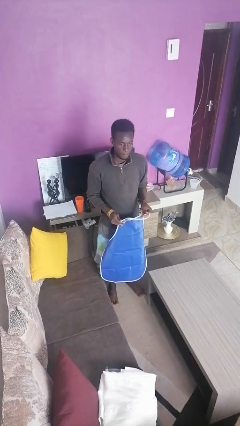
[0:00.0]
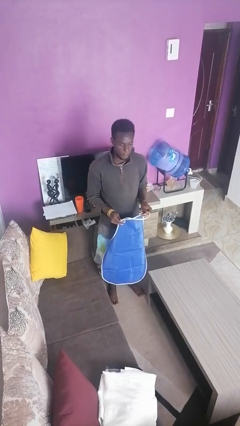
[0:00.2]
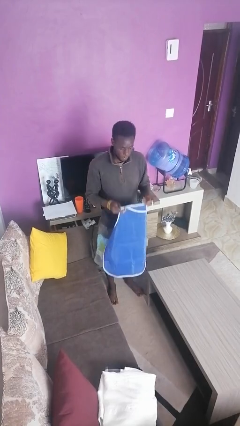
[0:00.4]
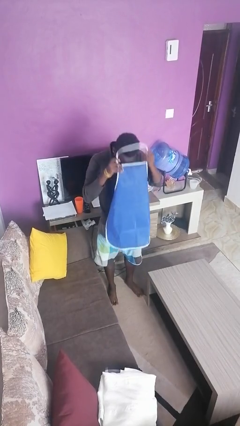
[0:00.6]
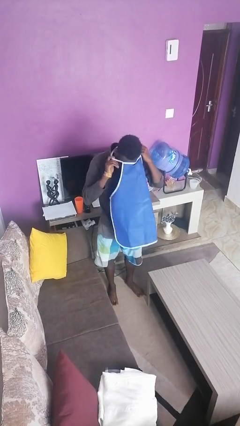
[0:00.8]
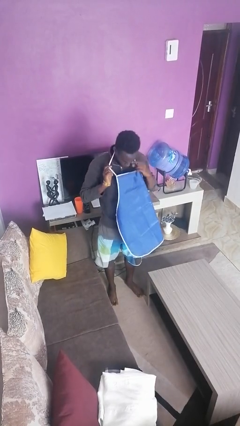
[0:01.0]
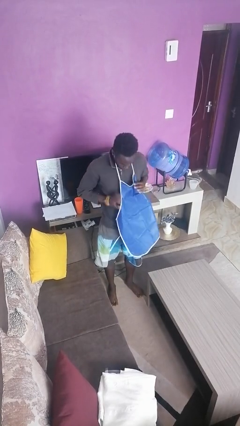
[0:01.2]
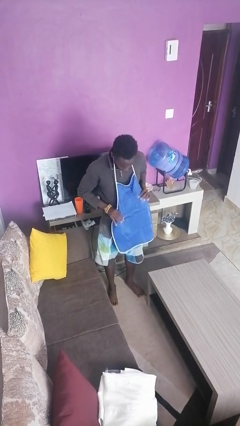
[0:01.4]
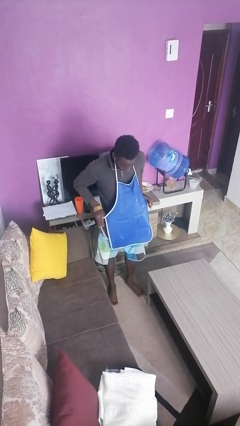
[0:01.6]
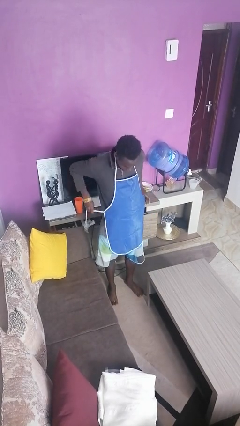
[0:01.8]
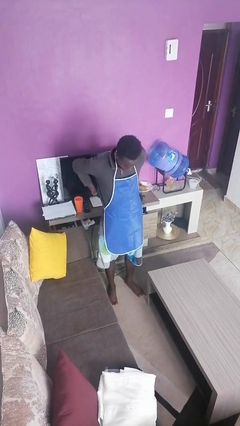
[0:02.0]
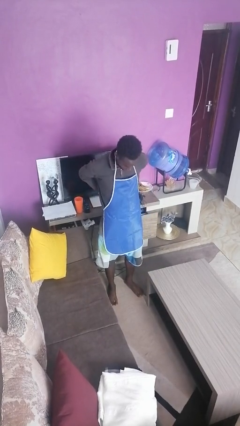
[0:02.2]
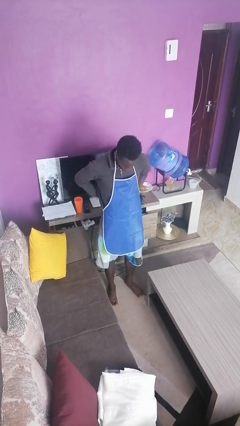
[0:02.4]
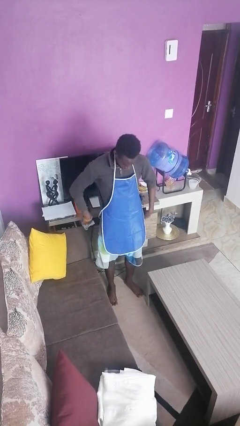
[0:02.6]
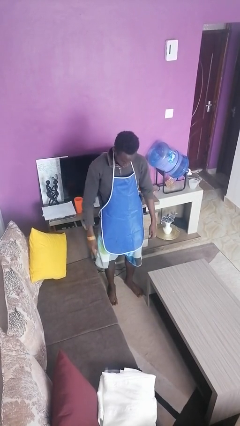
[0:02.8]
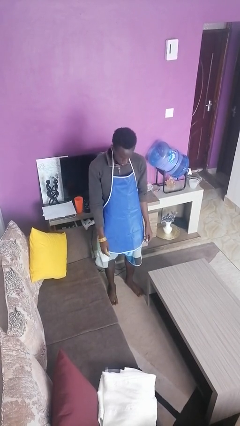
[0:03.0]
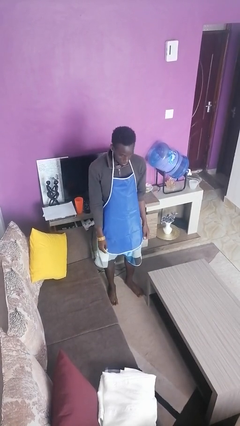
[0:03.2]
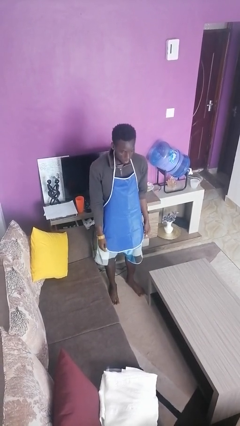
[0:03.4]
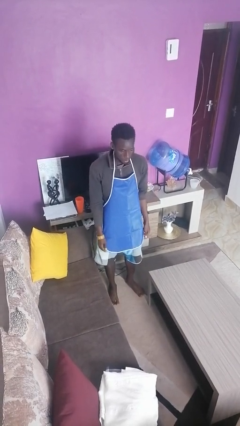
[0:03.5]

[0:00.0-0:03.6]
person puts on apron

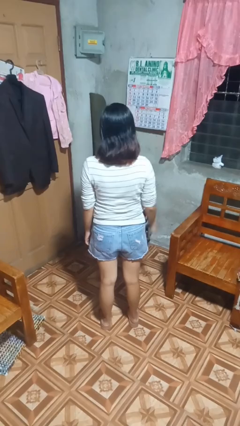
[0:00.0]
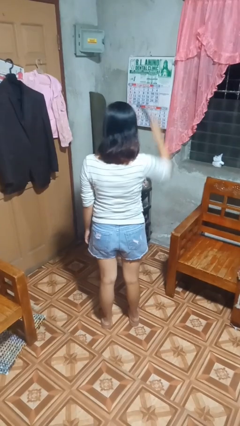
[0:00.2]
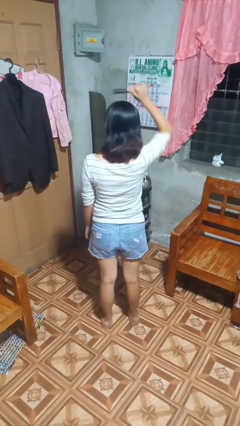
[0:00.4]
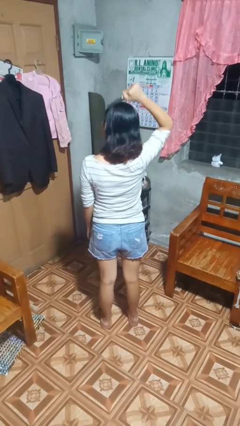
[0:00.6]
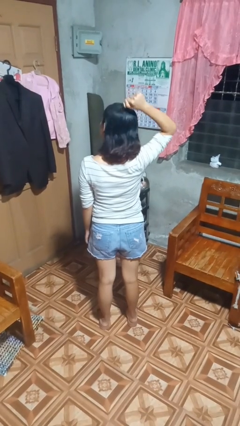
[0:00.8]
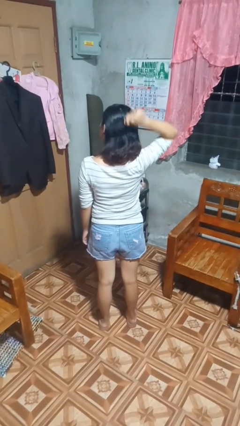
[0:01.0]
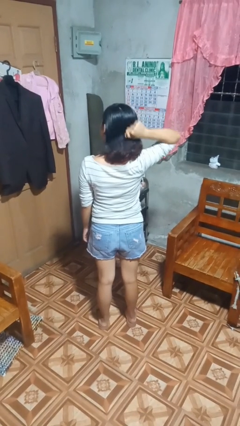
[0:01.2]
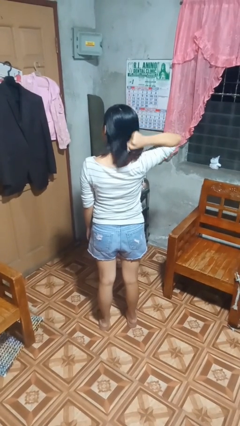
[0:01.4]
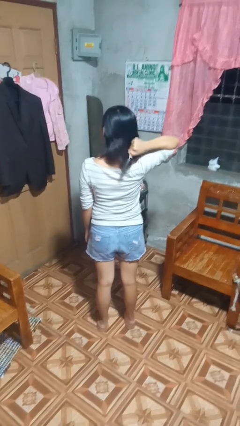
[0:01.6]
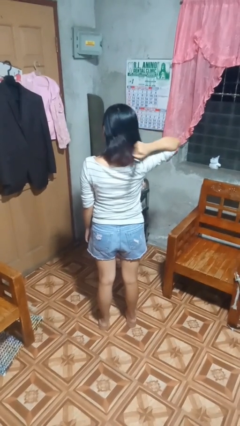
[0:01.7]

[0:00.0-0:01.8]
person brushes hair

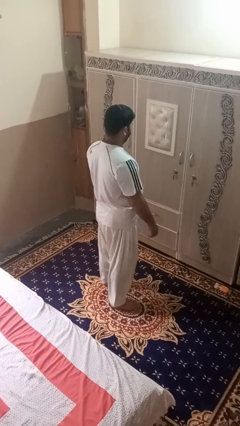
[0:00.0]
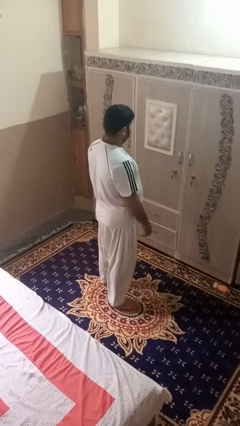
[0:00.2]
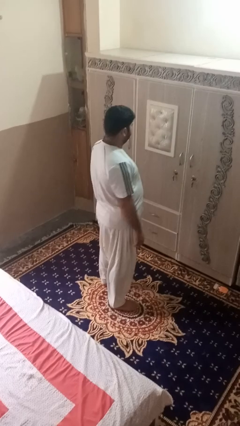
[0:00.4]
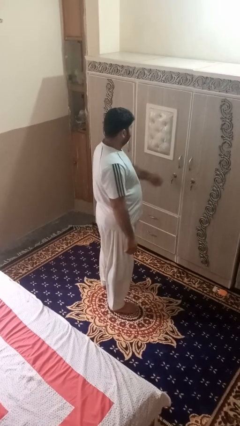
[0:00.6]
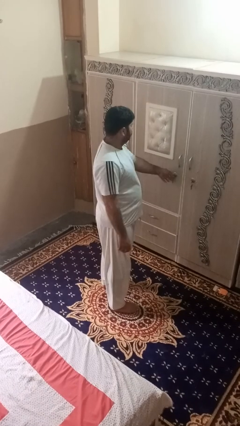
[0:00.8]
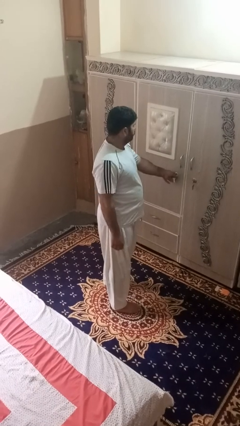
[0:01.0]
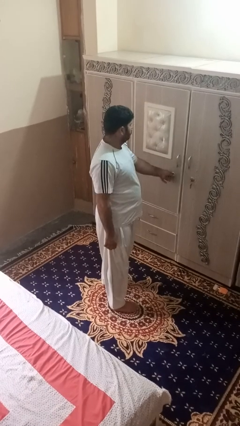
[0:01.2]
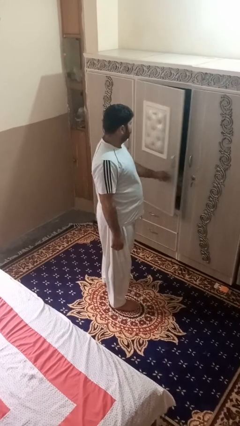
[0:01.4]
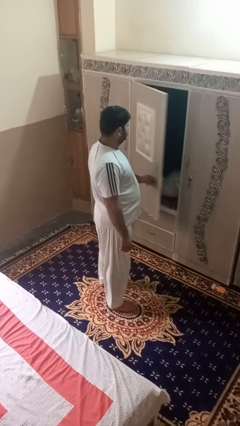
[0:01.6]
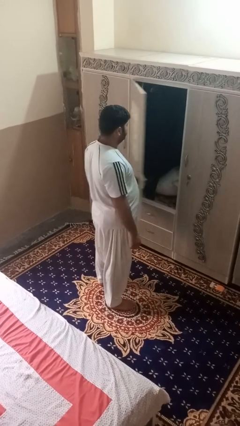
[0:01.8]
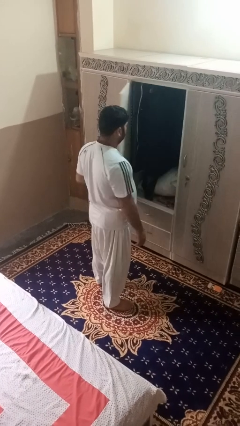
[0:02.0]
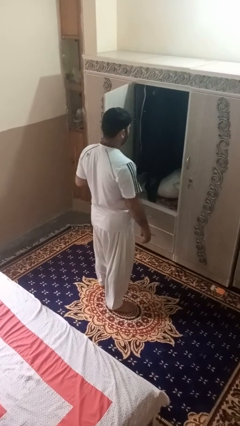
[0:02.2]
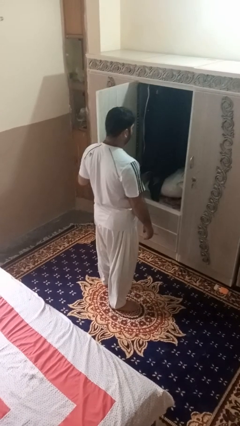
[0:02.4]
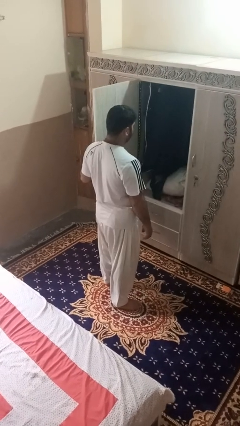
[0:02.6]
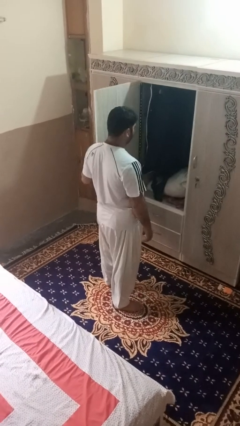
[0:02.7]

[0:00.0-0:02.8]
person opens dresser drawer

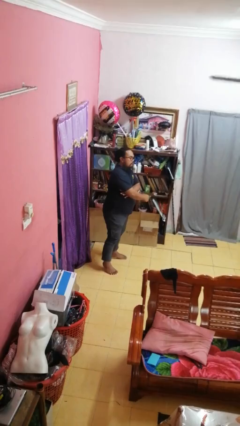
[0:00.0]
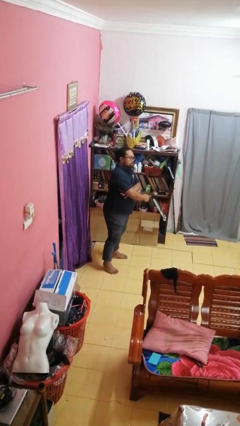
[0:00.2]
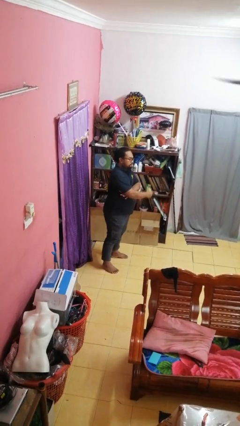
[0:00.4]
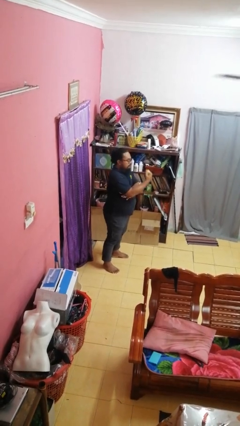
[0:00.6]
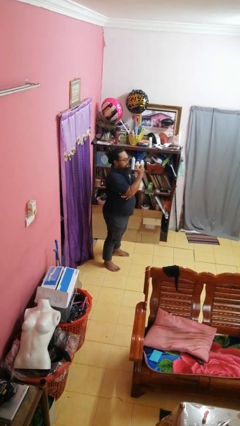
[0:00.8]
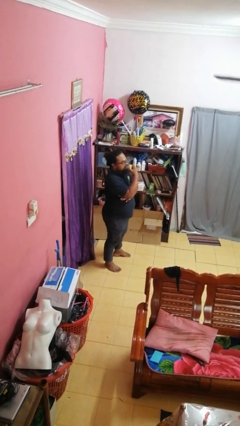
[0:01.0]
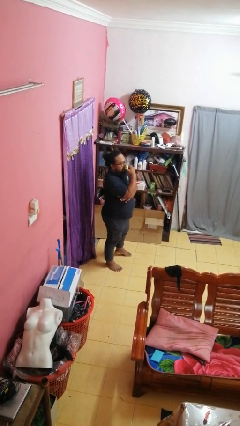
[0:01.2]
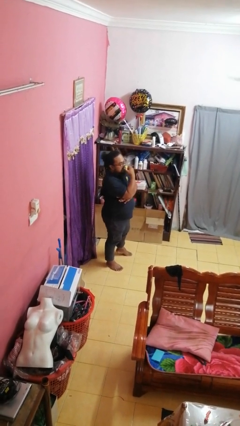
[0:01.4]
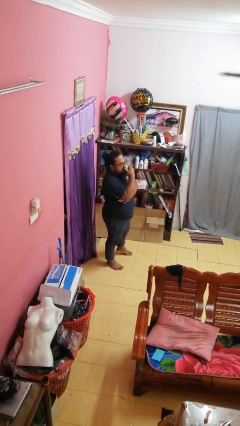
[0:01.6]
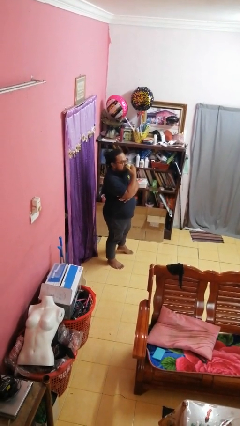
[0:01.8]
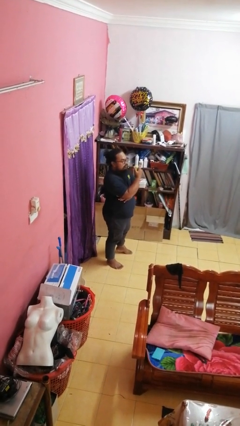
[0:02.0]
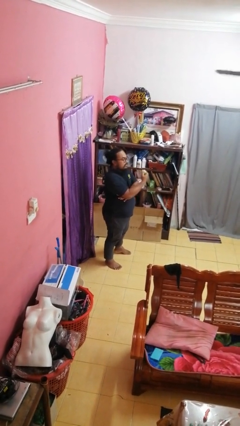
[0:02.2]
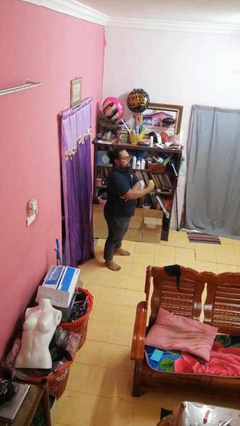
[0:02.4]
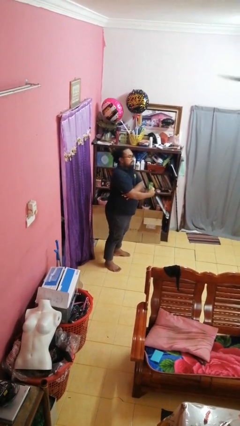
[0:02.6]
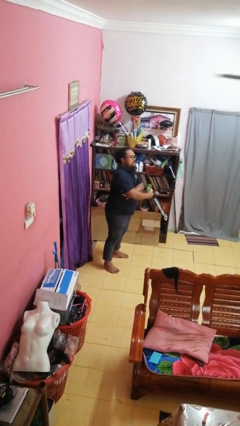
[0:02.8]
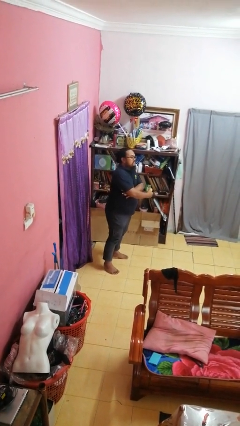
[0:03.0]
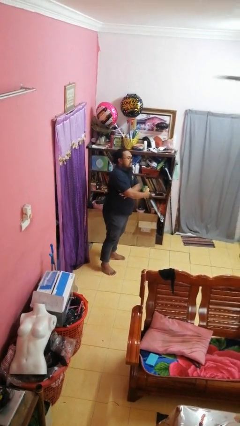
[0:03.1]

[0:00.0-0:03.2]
person eats apple

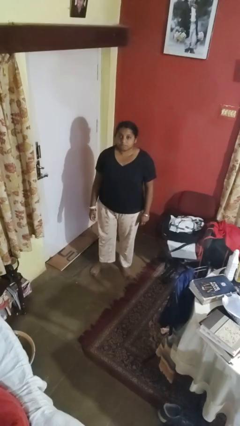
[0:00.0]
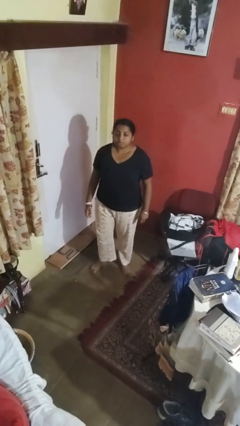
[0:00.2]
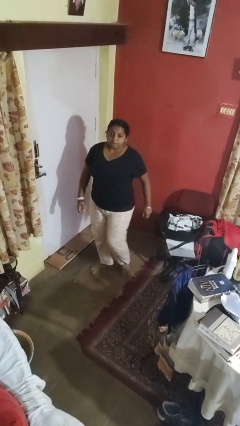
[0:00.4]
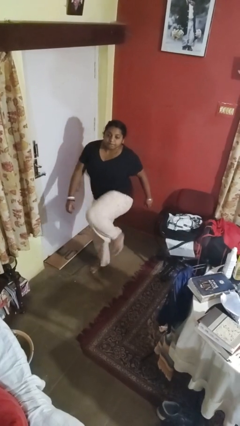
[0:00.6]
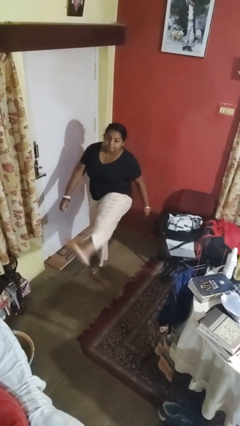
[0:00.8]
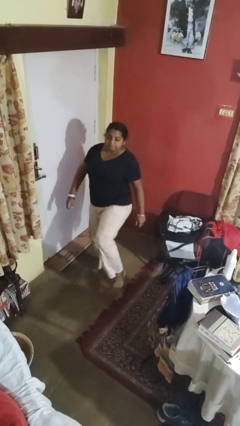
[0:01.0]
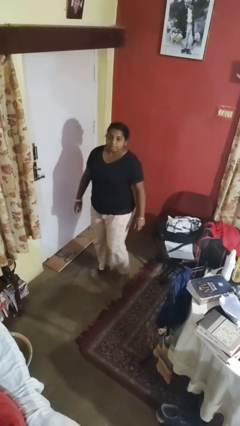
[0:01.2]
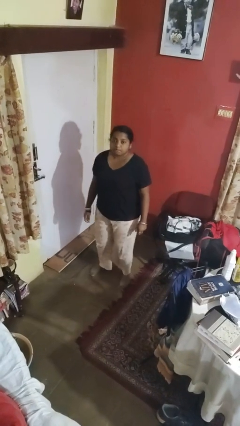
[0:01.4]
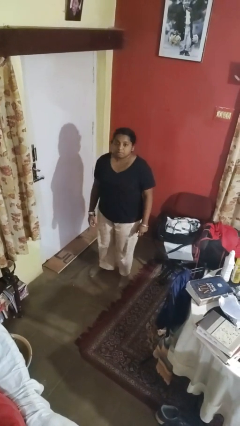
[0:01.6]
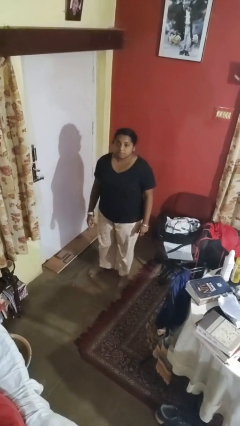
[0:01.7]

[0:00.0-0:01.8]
person karate kicks

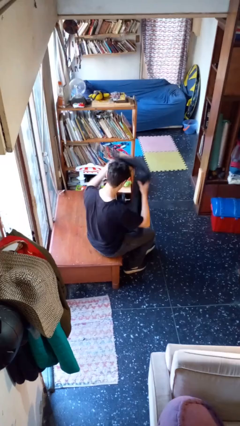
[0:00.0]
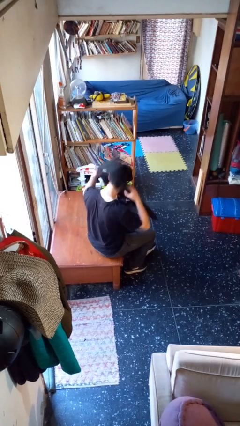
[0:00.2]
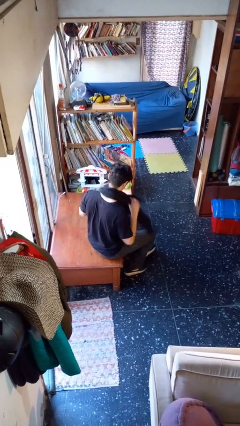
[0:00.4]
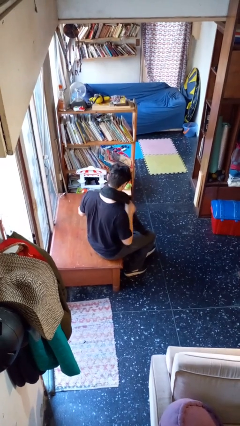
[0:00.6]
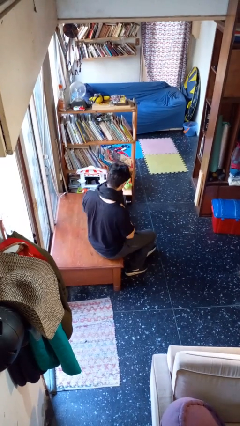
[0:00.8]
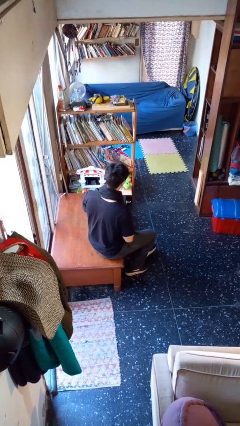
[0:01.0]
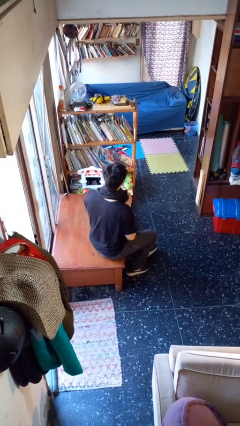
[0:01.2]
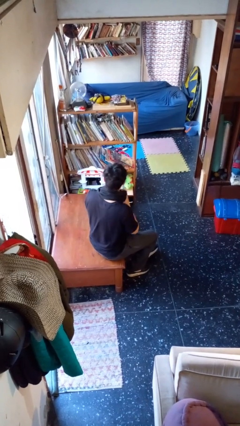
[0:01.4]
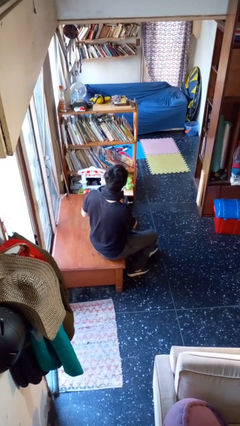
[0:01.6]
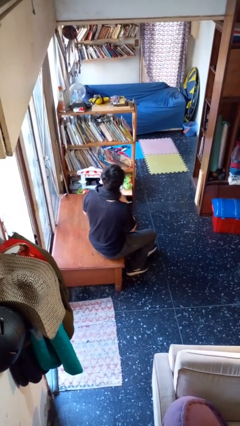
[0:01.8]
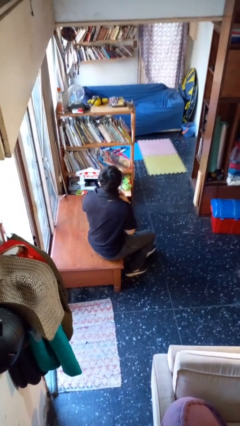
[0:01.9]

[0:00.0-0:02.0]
person puts on scarf

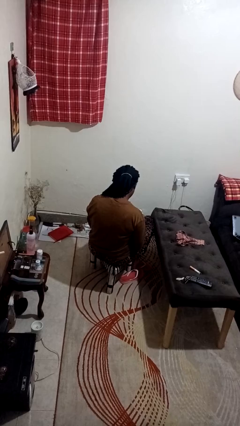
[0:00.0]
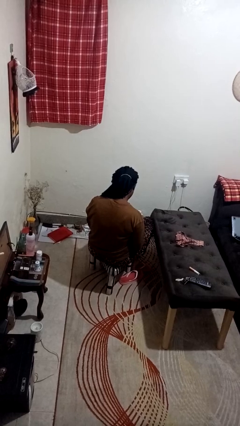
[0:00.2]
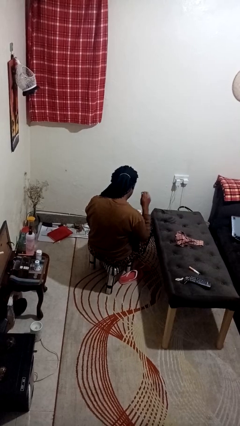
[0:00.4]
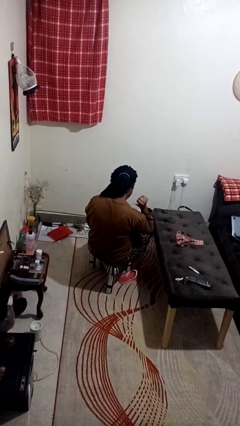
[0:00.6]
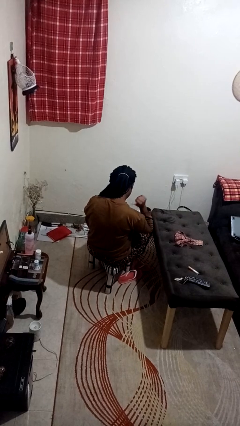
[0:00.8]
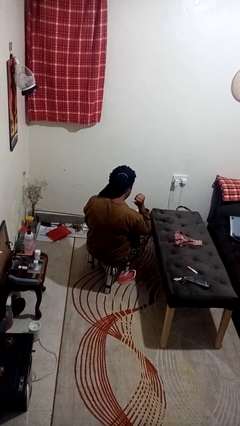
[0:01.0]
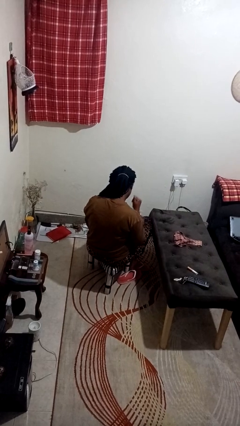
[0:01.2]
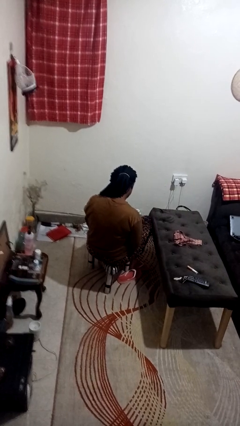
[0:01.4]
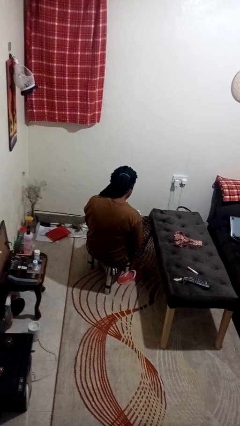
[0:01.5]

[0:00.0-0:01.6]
person gestures behind me

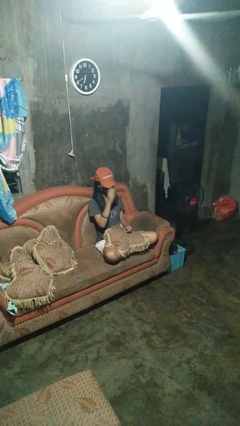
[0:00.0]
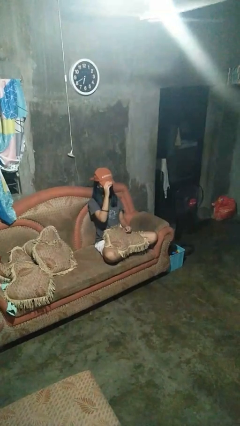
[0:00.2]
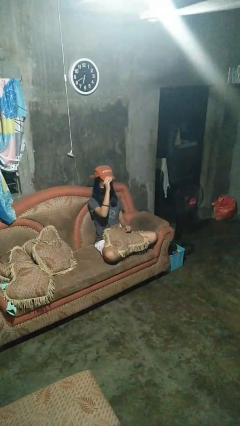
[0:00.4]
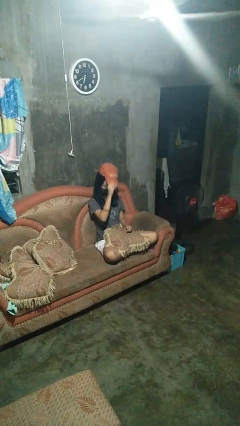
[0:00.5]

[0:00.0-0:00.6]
person takes off hat
